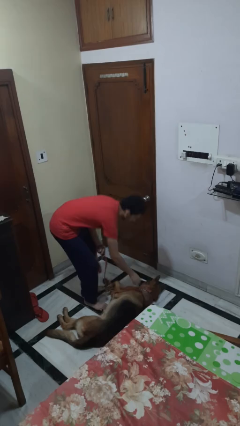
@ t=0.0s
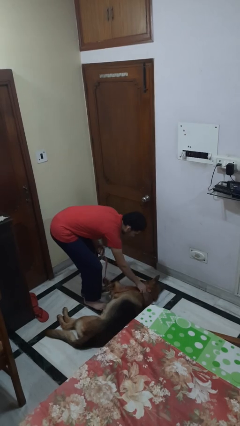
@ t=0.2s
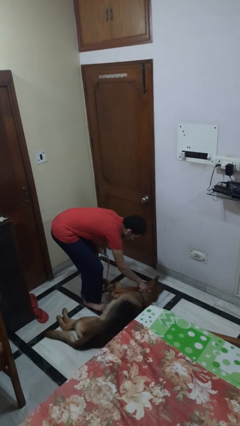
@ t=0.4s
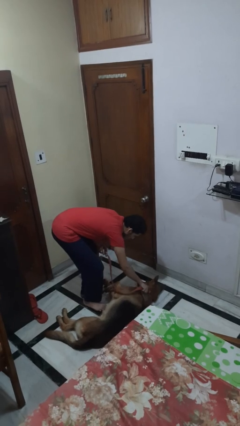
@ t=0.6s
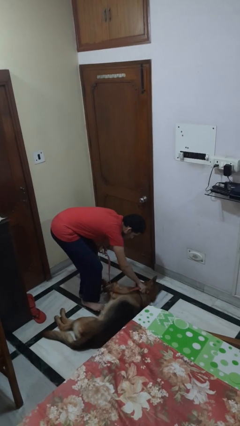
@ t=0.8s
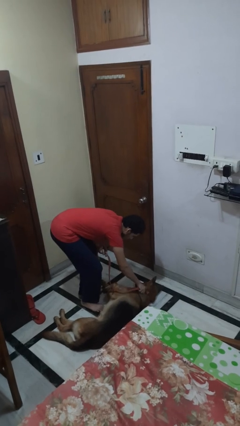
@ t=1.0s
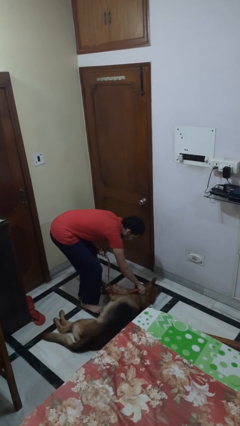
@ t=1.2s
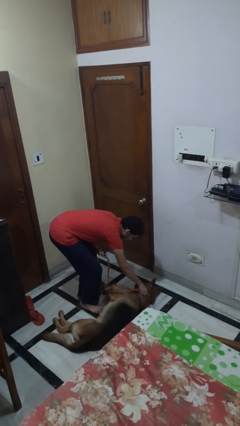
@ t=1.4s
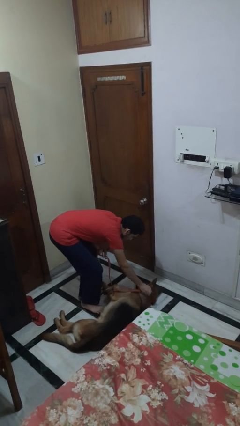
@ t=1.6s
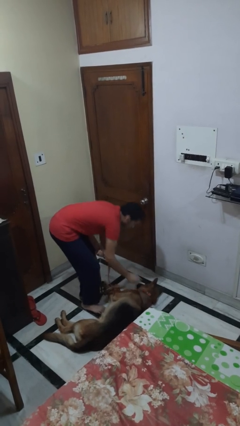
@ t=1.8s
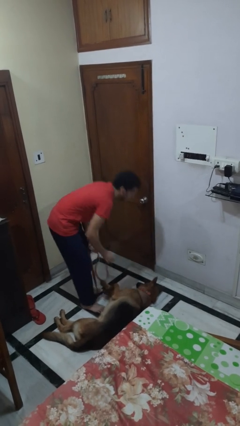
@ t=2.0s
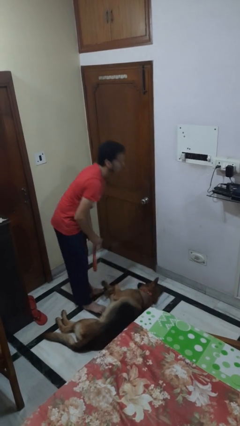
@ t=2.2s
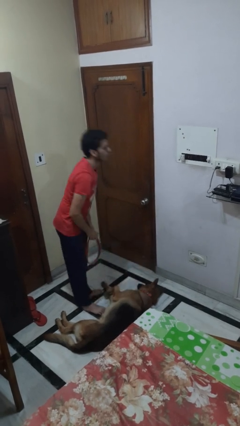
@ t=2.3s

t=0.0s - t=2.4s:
person unattaches leash from dog

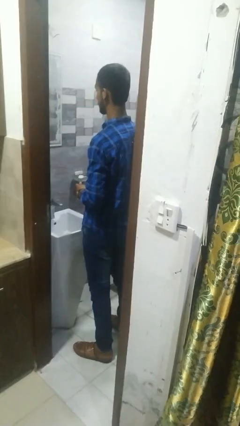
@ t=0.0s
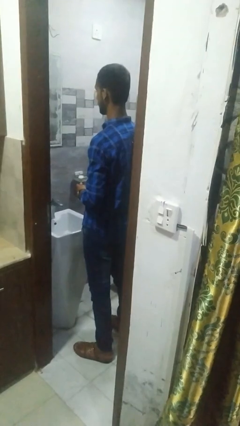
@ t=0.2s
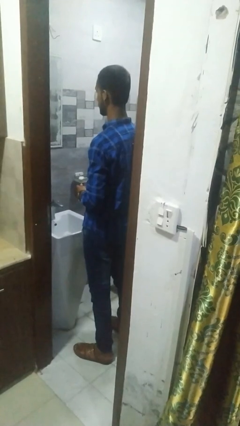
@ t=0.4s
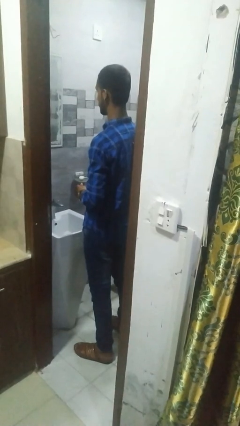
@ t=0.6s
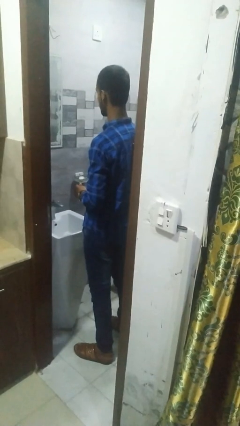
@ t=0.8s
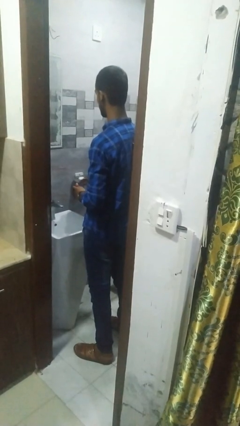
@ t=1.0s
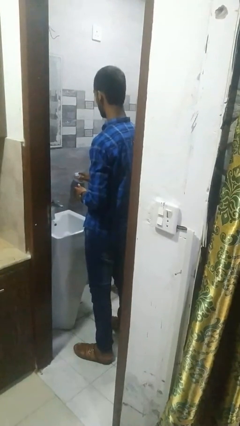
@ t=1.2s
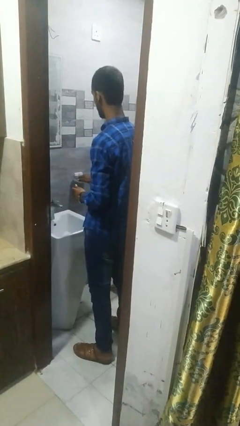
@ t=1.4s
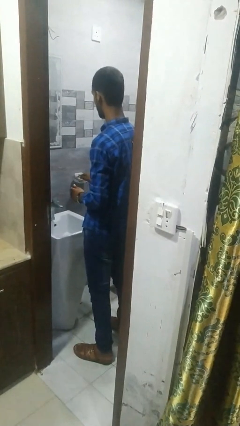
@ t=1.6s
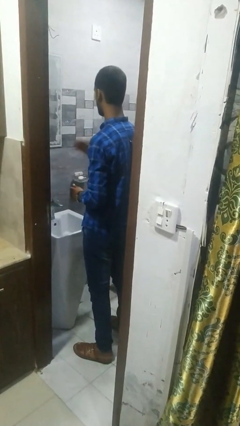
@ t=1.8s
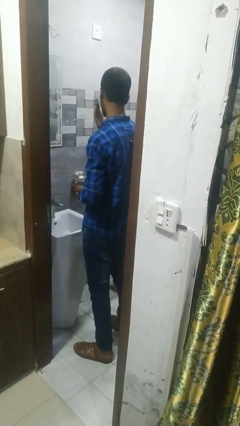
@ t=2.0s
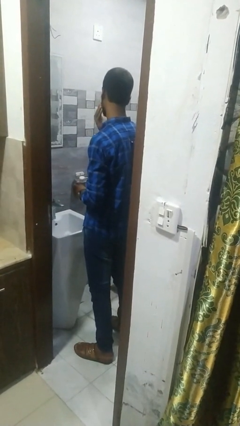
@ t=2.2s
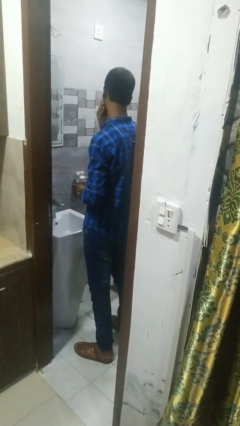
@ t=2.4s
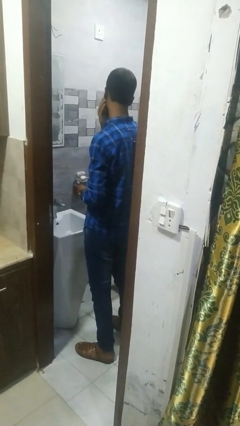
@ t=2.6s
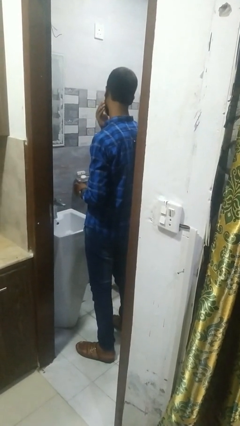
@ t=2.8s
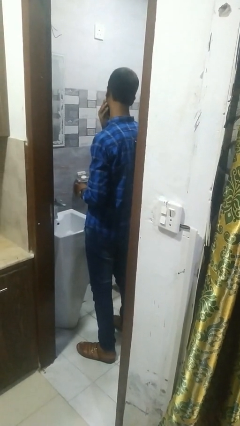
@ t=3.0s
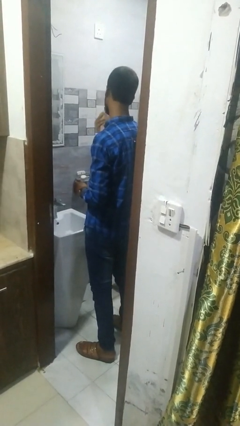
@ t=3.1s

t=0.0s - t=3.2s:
person applies shaving cream

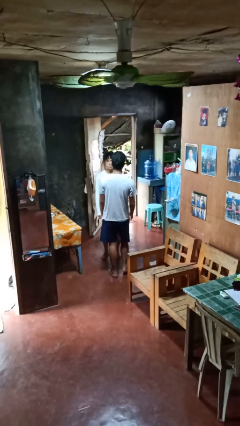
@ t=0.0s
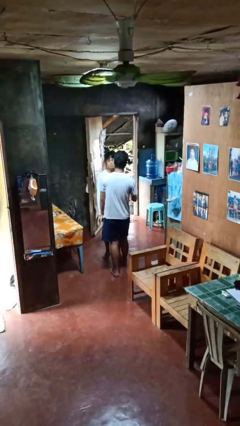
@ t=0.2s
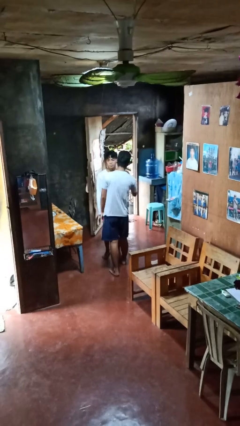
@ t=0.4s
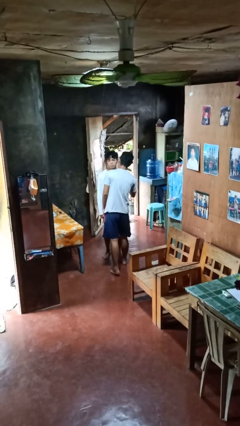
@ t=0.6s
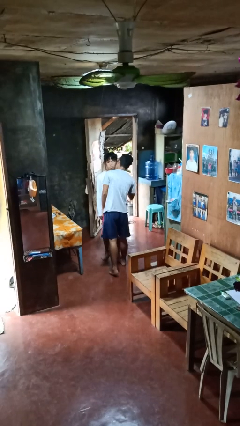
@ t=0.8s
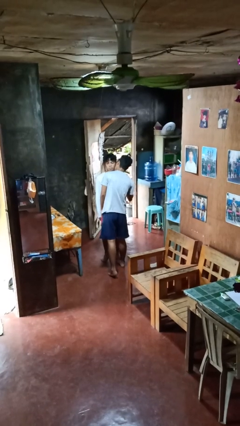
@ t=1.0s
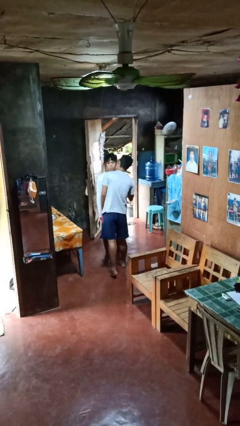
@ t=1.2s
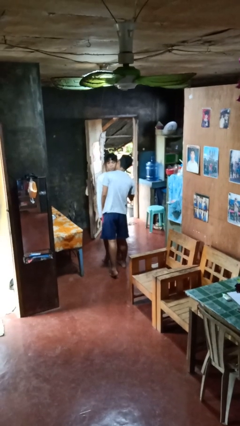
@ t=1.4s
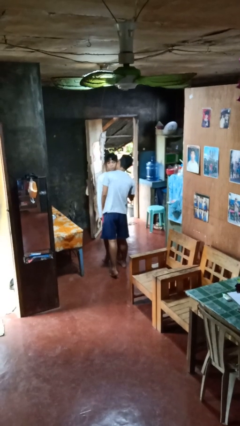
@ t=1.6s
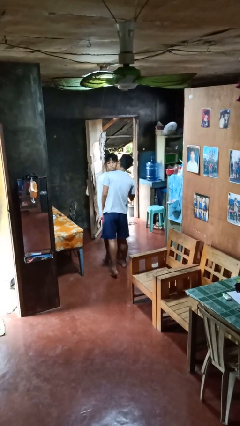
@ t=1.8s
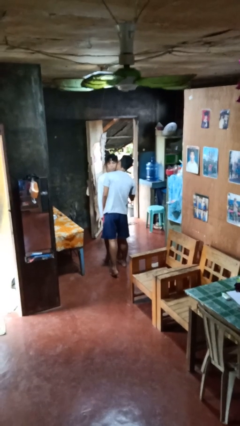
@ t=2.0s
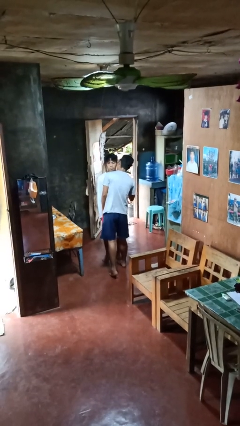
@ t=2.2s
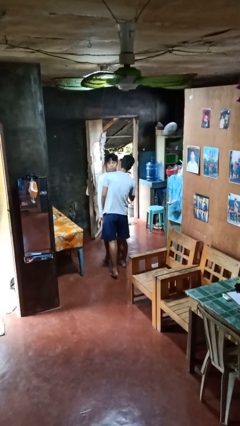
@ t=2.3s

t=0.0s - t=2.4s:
person kisses cheek of person

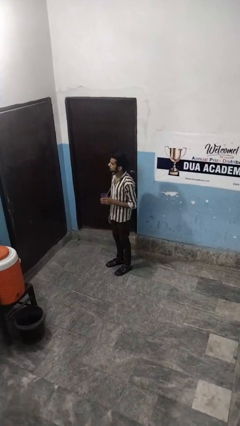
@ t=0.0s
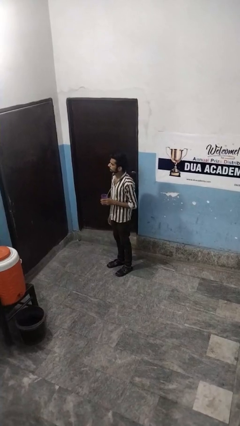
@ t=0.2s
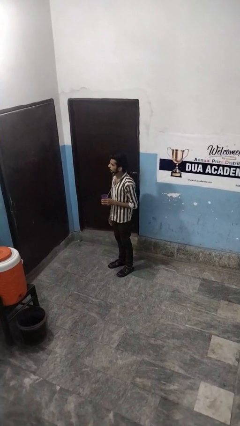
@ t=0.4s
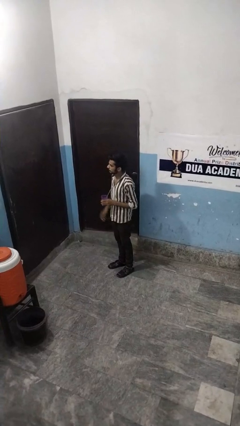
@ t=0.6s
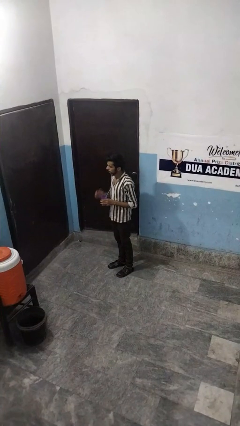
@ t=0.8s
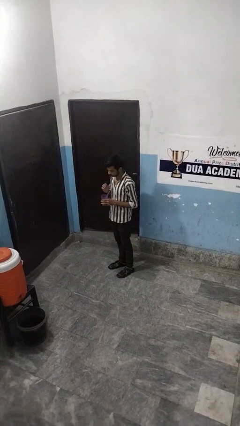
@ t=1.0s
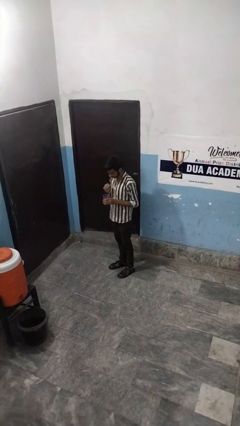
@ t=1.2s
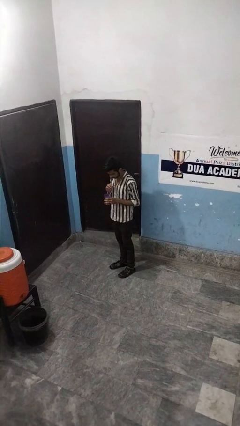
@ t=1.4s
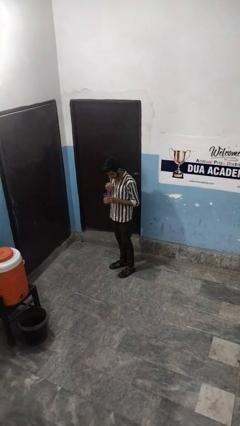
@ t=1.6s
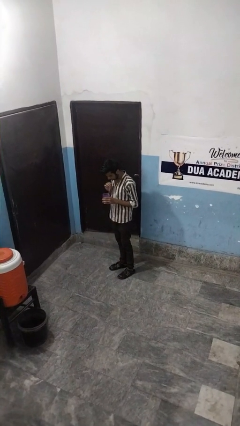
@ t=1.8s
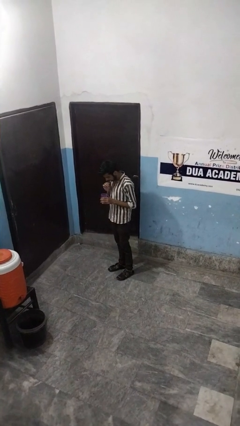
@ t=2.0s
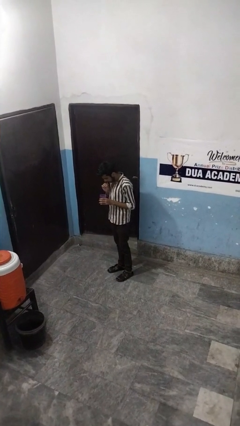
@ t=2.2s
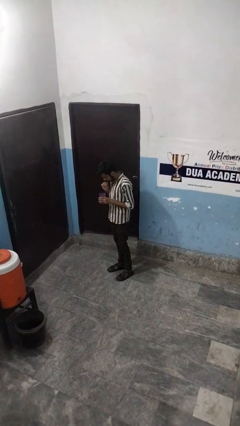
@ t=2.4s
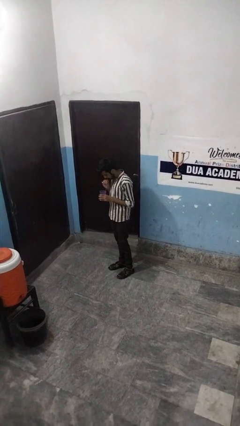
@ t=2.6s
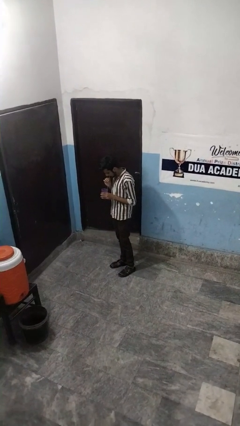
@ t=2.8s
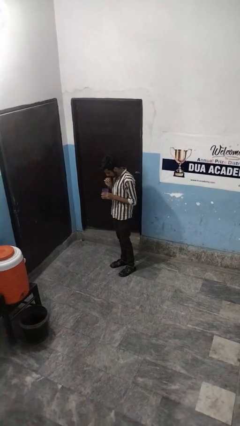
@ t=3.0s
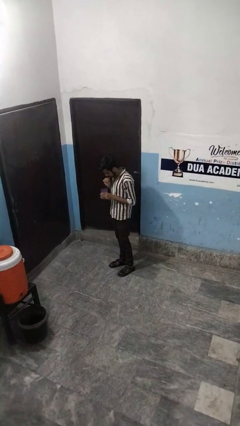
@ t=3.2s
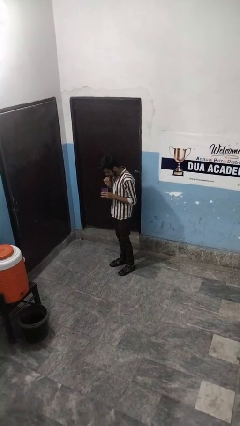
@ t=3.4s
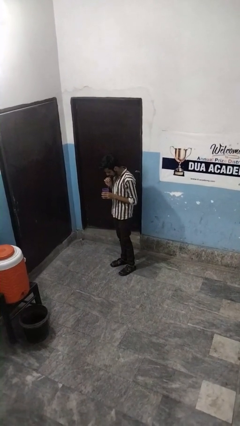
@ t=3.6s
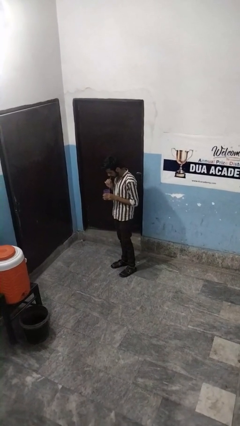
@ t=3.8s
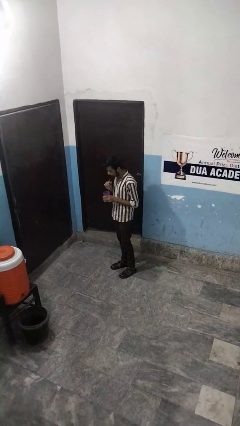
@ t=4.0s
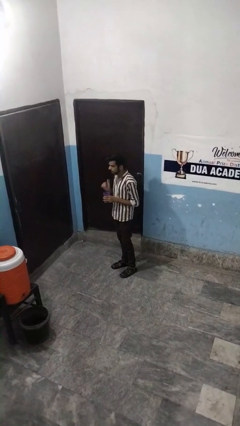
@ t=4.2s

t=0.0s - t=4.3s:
person drinks from straw

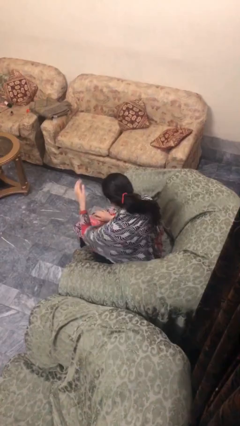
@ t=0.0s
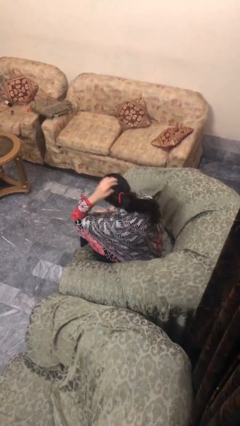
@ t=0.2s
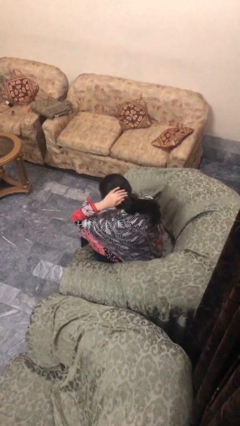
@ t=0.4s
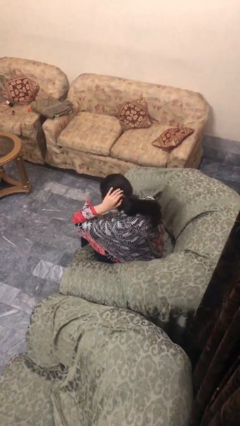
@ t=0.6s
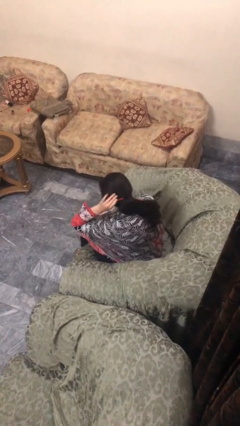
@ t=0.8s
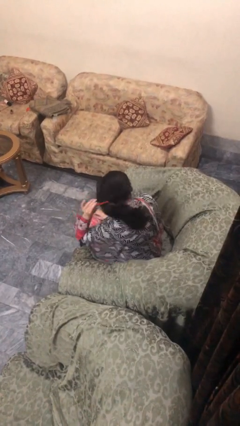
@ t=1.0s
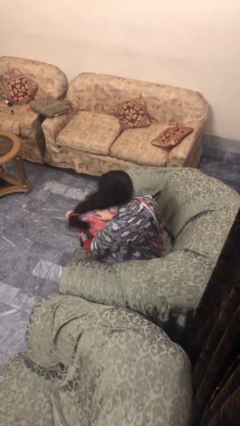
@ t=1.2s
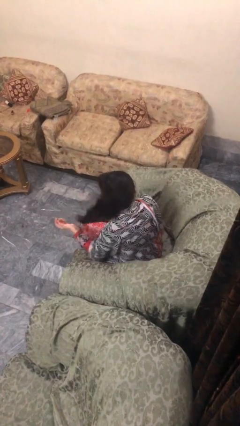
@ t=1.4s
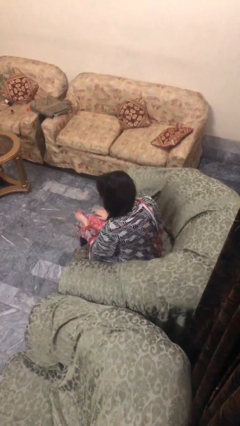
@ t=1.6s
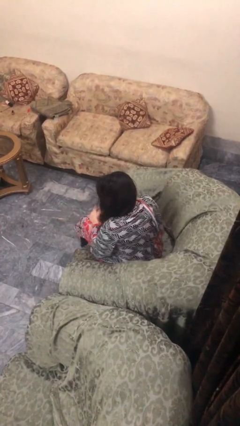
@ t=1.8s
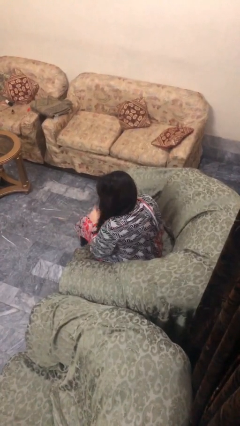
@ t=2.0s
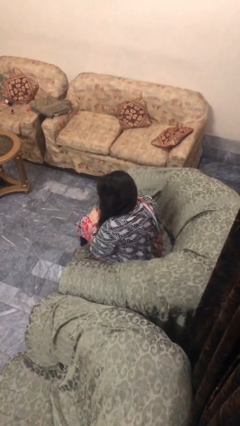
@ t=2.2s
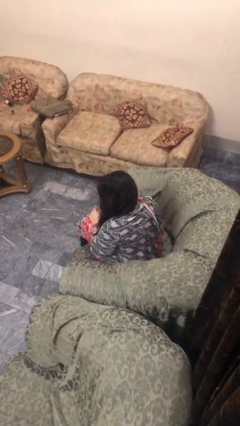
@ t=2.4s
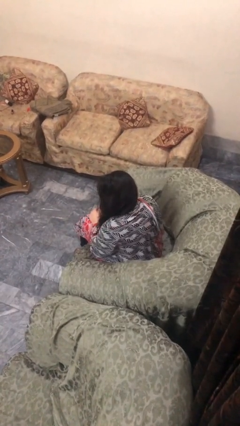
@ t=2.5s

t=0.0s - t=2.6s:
person takes off hairtie

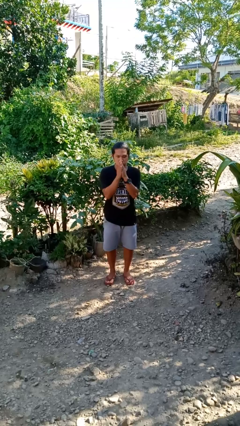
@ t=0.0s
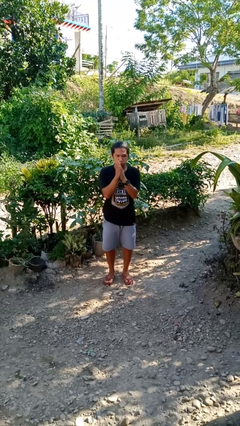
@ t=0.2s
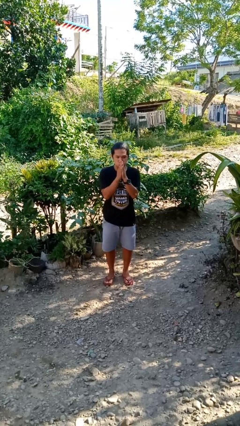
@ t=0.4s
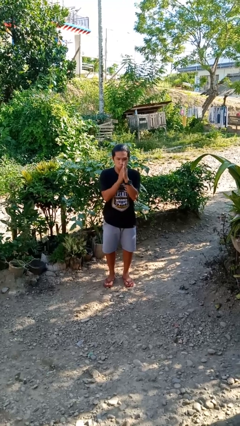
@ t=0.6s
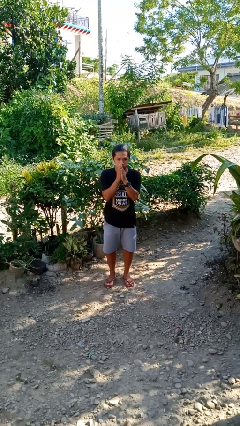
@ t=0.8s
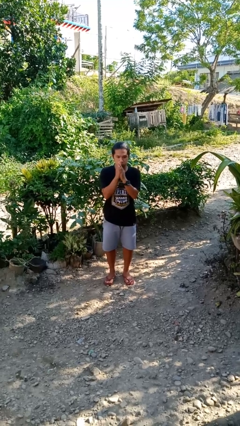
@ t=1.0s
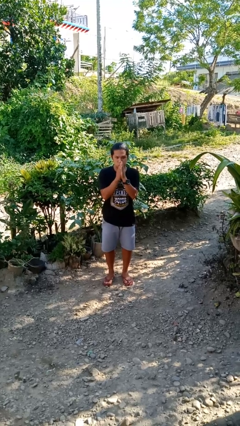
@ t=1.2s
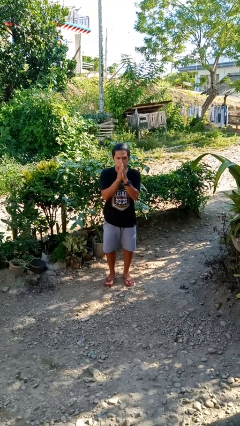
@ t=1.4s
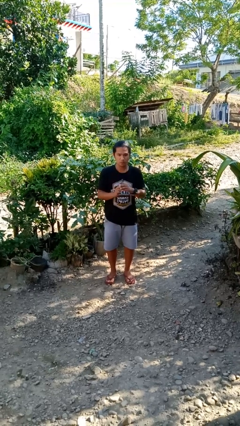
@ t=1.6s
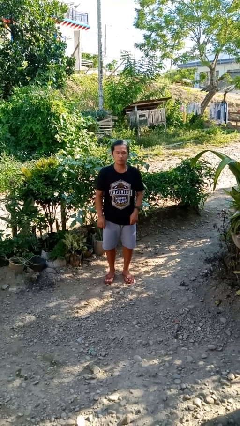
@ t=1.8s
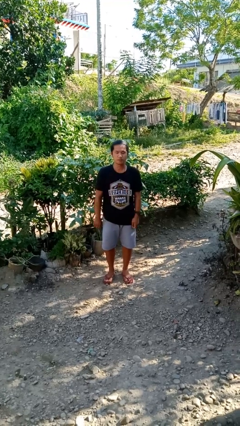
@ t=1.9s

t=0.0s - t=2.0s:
person blows into hands

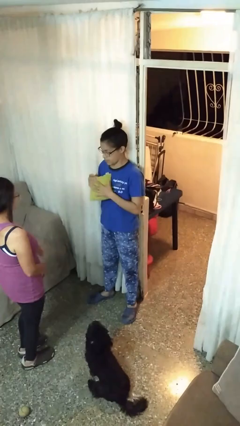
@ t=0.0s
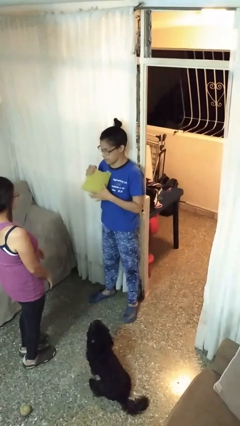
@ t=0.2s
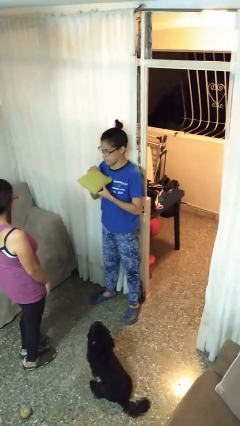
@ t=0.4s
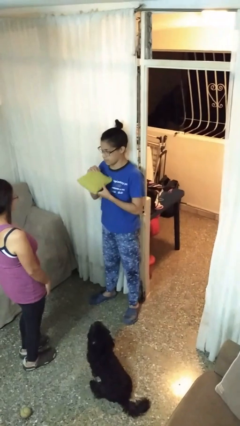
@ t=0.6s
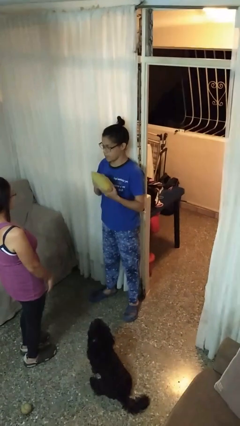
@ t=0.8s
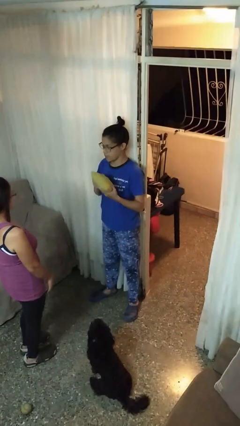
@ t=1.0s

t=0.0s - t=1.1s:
person catches object from person
